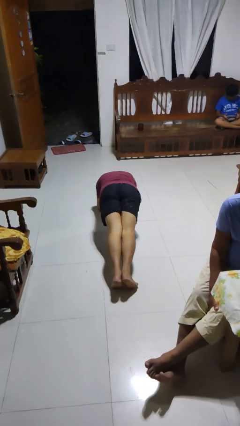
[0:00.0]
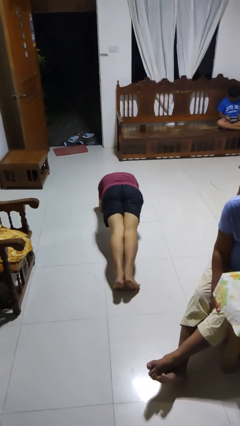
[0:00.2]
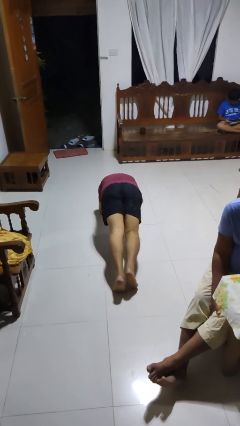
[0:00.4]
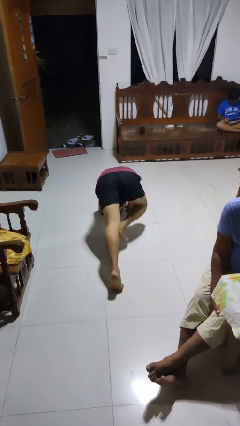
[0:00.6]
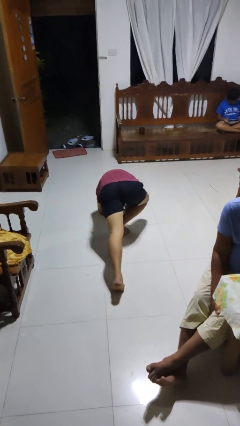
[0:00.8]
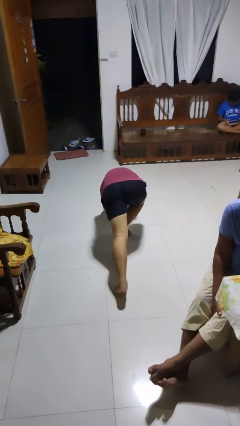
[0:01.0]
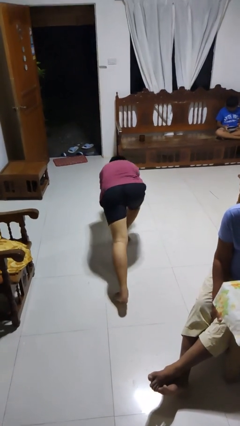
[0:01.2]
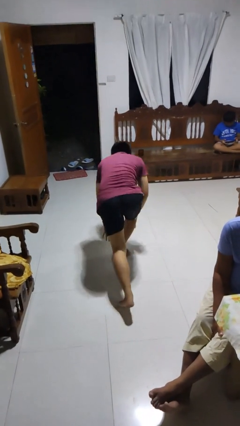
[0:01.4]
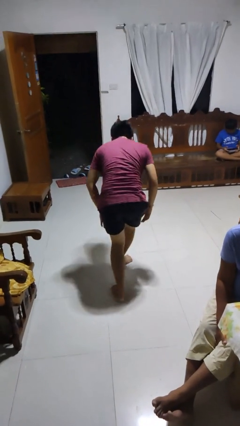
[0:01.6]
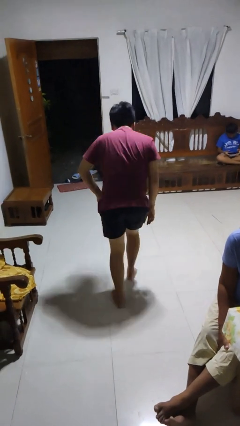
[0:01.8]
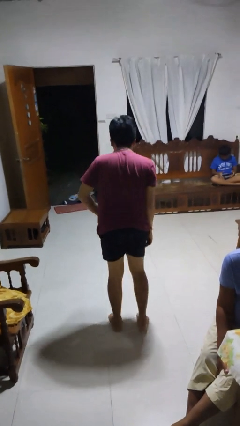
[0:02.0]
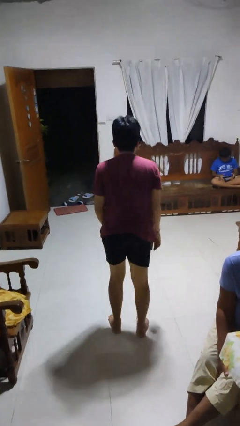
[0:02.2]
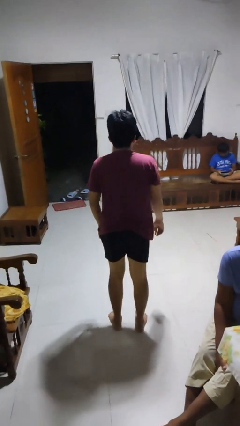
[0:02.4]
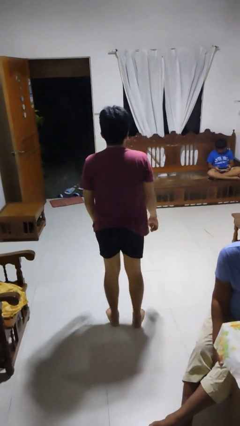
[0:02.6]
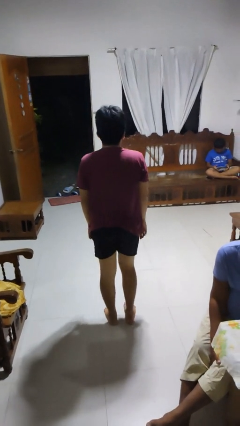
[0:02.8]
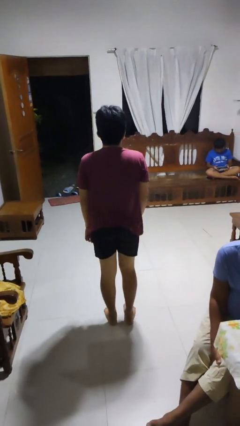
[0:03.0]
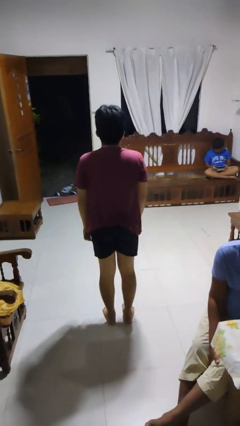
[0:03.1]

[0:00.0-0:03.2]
person stands up from floor

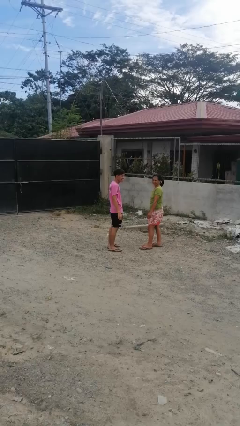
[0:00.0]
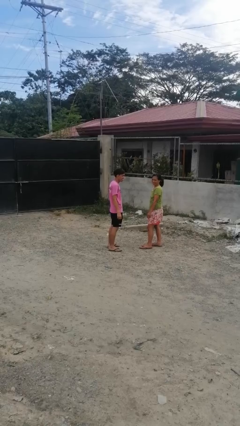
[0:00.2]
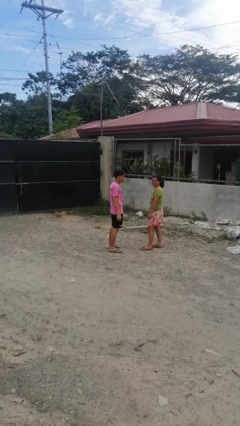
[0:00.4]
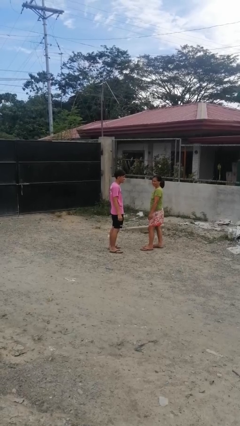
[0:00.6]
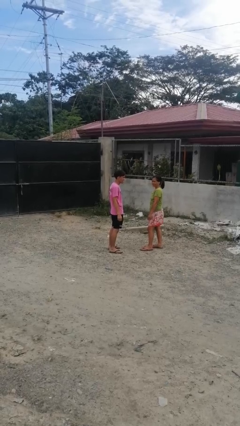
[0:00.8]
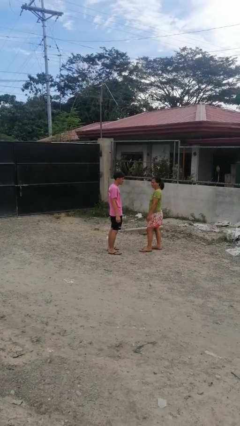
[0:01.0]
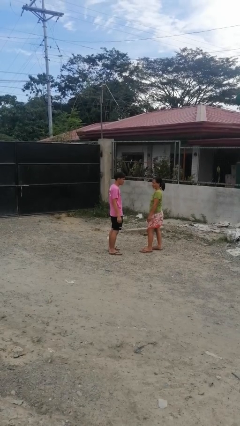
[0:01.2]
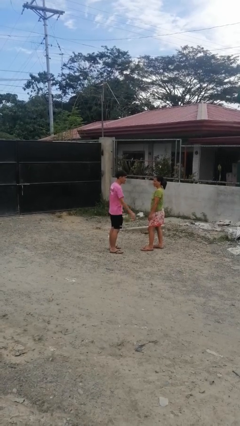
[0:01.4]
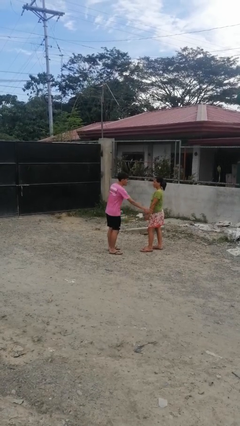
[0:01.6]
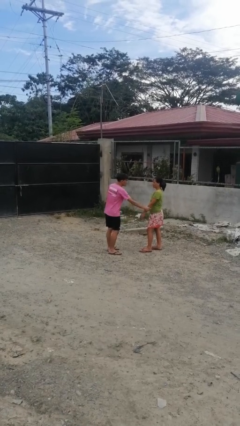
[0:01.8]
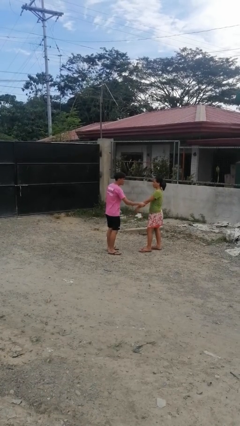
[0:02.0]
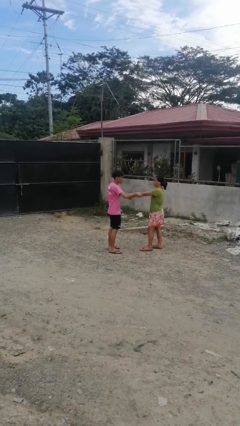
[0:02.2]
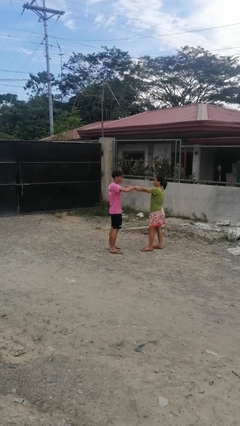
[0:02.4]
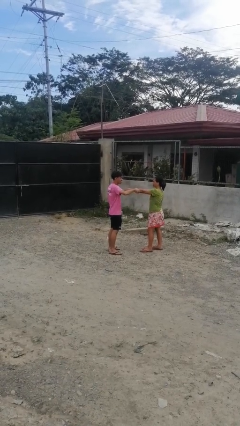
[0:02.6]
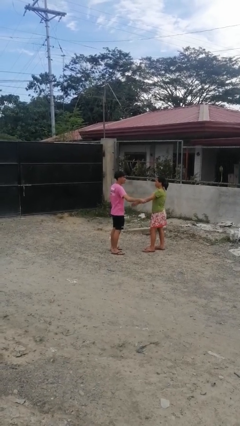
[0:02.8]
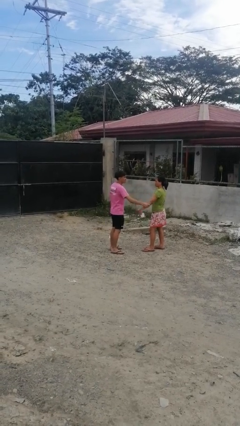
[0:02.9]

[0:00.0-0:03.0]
person grabs person by forearm

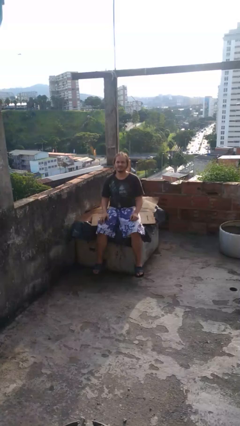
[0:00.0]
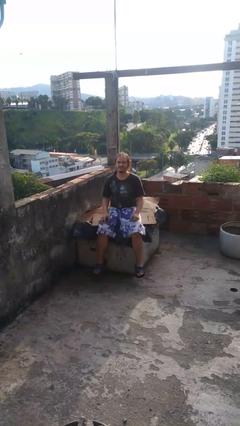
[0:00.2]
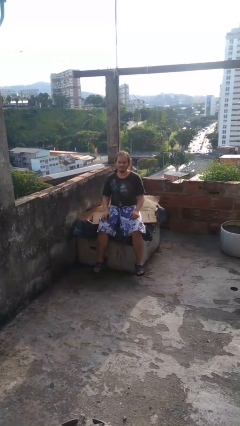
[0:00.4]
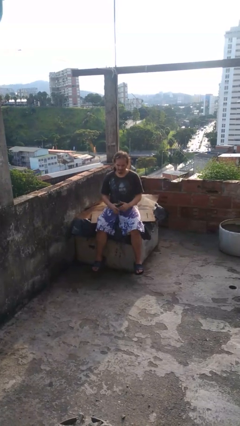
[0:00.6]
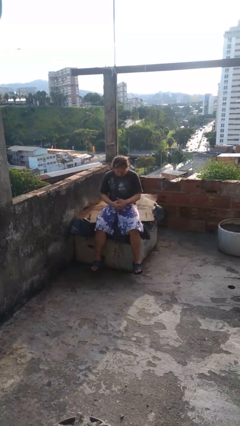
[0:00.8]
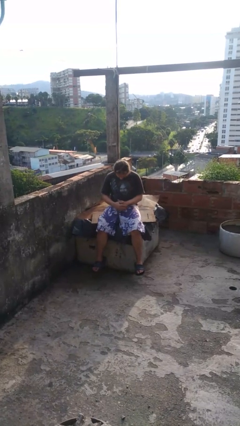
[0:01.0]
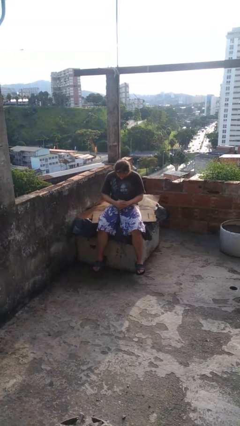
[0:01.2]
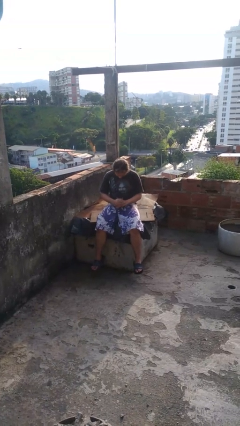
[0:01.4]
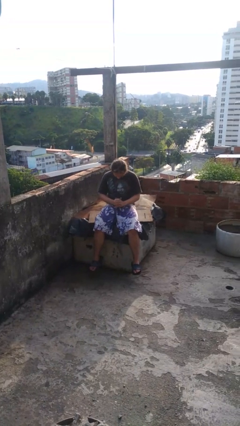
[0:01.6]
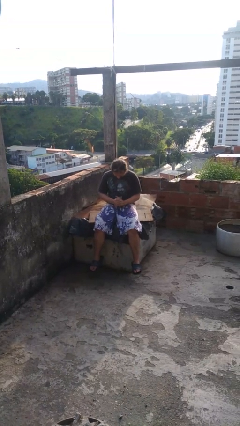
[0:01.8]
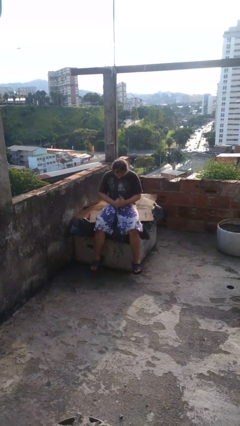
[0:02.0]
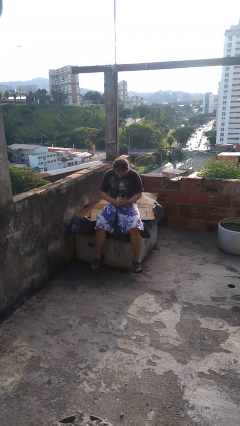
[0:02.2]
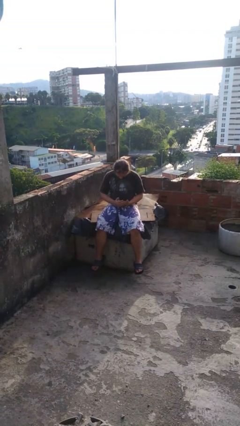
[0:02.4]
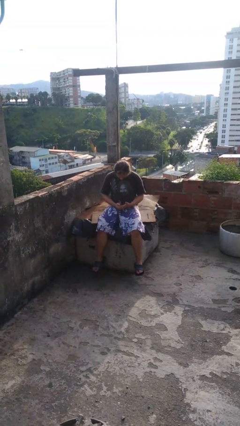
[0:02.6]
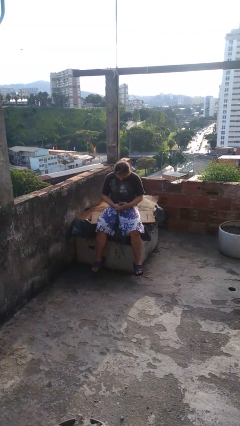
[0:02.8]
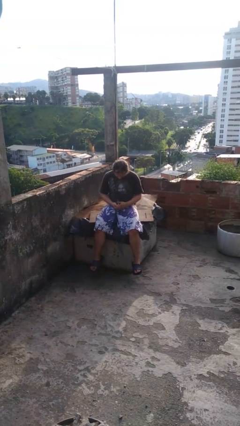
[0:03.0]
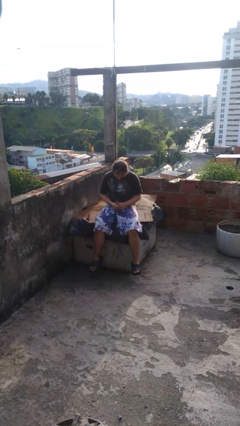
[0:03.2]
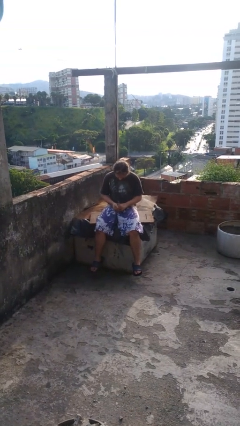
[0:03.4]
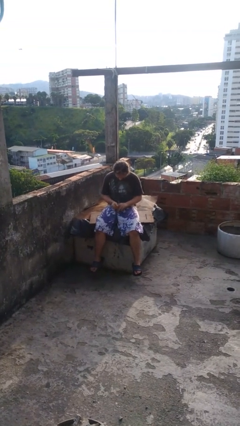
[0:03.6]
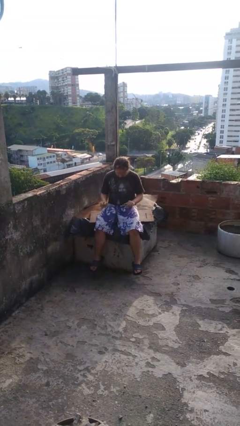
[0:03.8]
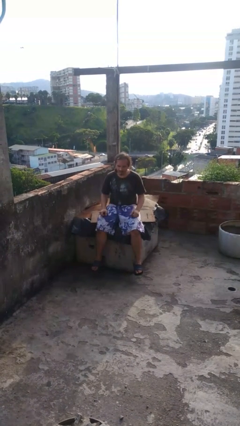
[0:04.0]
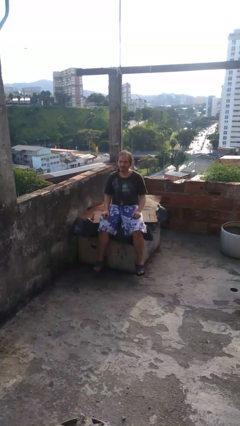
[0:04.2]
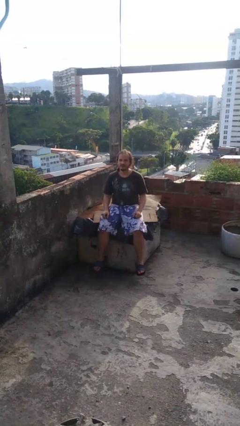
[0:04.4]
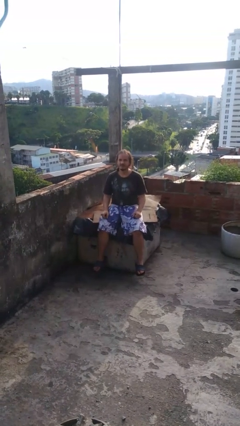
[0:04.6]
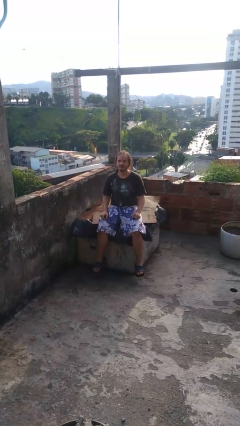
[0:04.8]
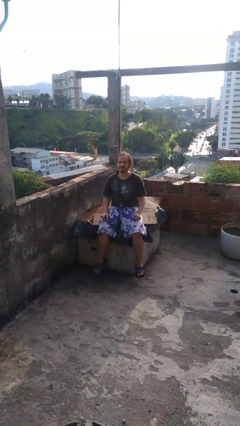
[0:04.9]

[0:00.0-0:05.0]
person looks at hands in lap

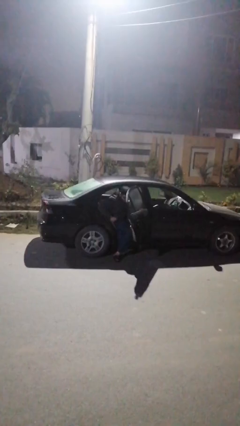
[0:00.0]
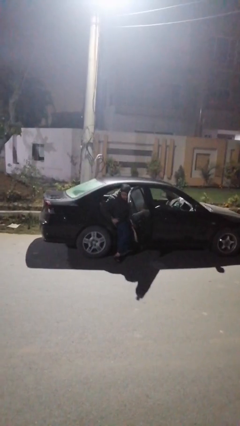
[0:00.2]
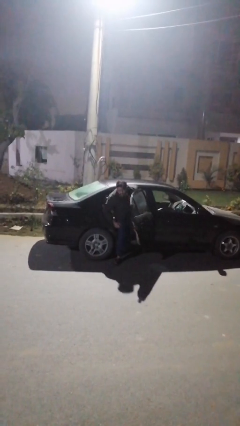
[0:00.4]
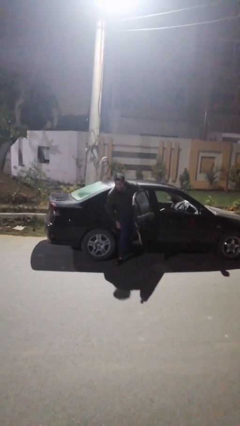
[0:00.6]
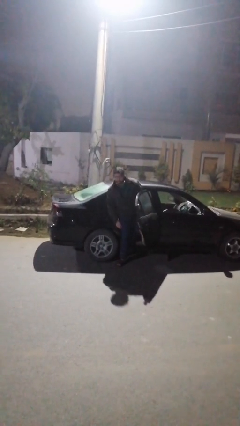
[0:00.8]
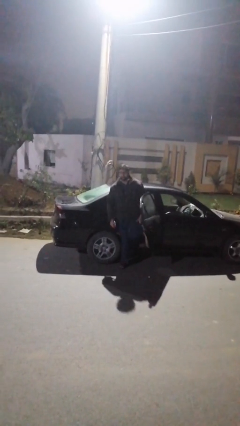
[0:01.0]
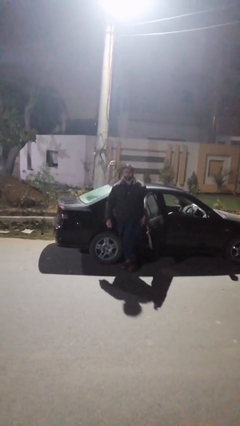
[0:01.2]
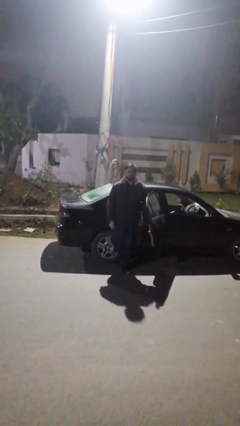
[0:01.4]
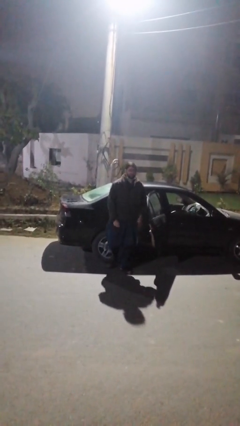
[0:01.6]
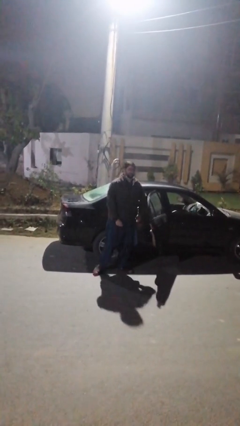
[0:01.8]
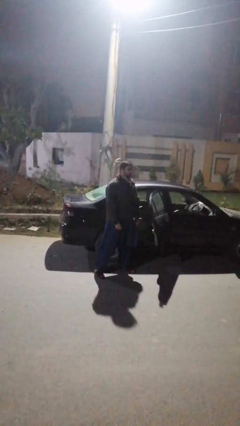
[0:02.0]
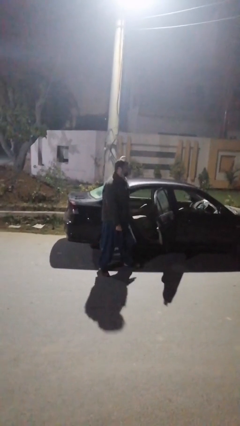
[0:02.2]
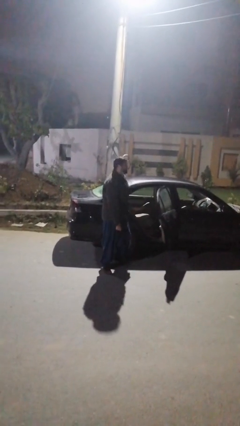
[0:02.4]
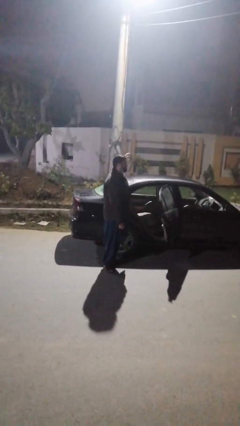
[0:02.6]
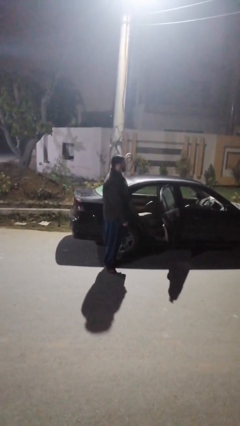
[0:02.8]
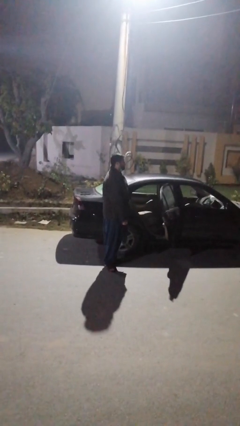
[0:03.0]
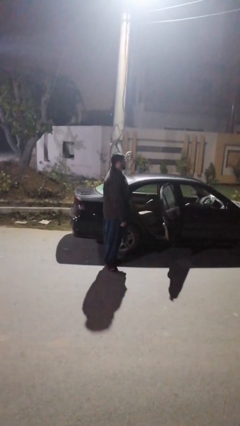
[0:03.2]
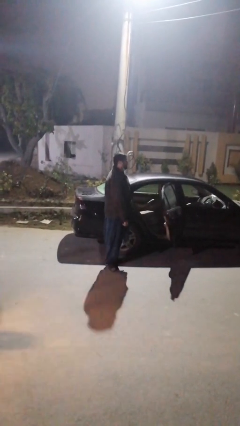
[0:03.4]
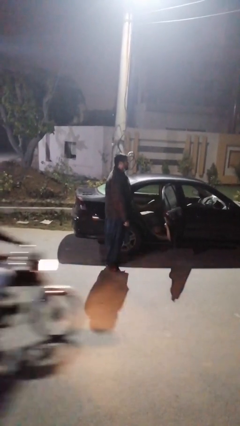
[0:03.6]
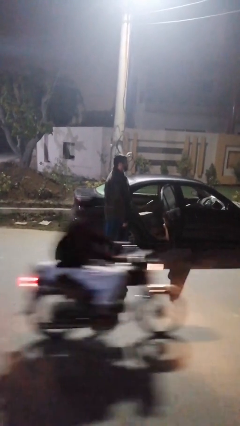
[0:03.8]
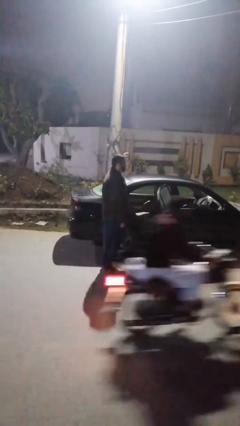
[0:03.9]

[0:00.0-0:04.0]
person exits car

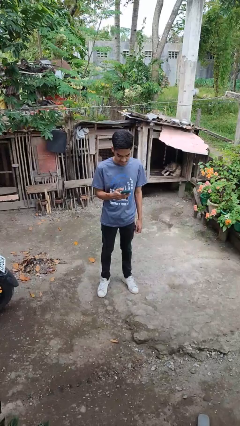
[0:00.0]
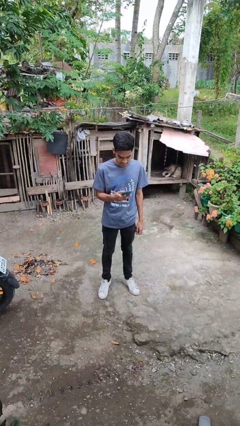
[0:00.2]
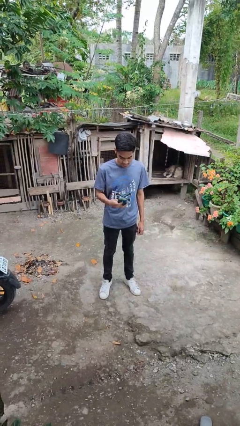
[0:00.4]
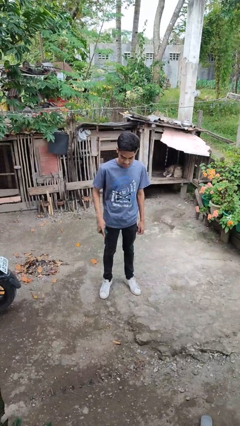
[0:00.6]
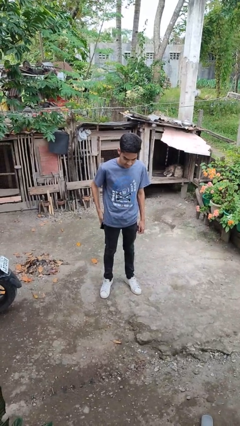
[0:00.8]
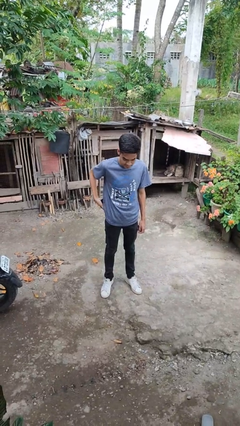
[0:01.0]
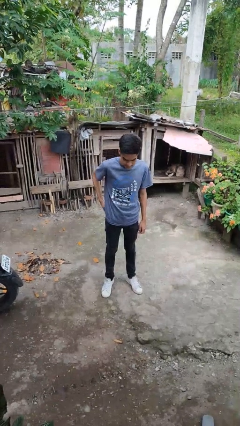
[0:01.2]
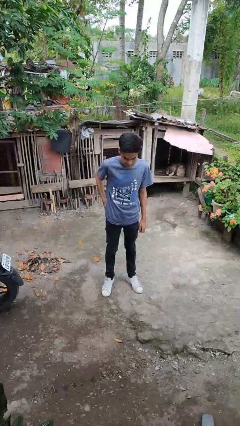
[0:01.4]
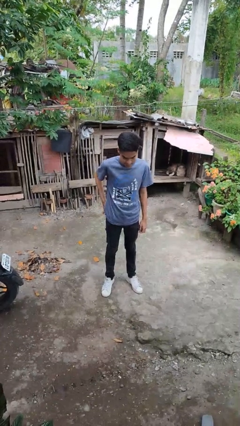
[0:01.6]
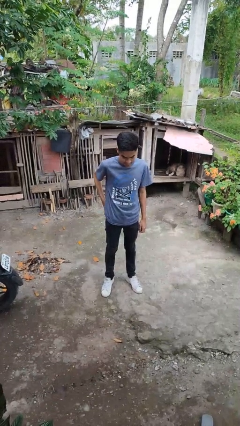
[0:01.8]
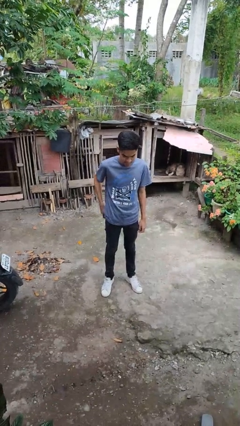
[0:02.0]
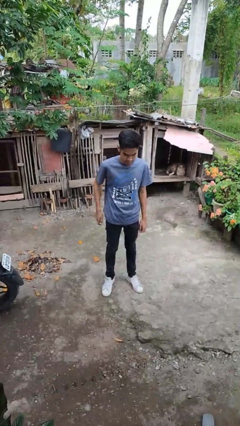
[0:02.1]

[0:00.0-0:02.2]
person puts phone into pocket
